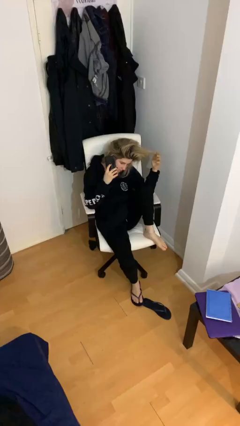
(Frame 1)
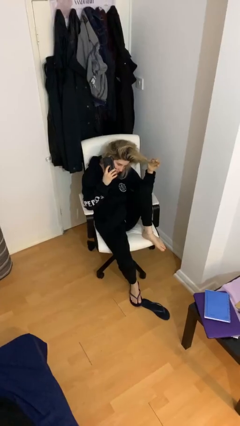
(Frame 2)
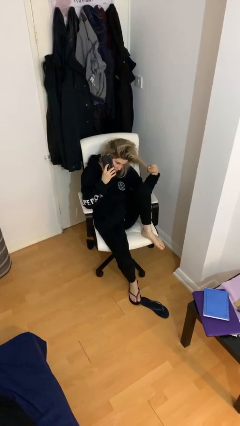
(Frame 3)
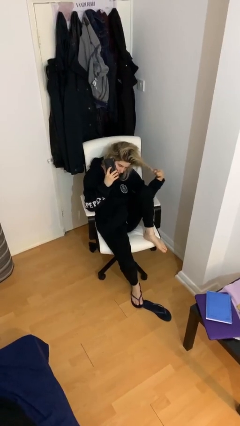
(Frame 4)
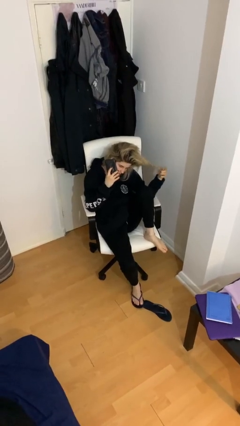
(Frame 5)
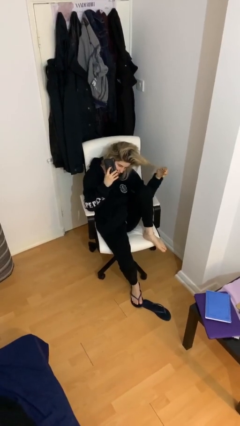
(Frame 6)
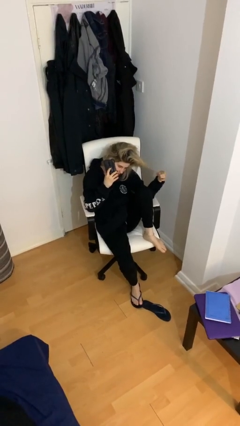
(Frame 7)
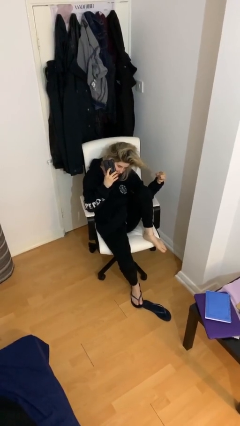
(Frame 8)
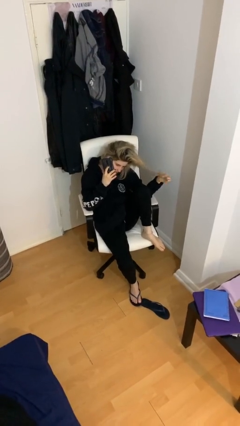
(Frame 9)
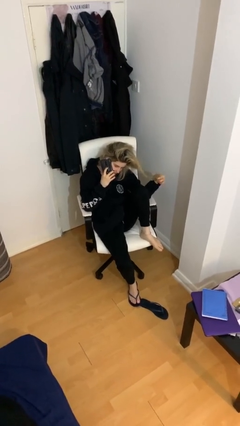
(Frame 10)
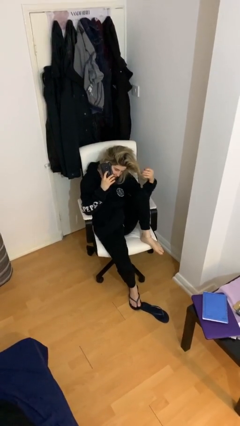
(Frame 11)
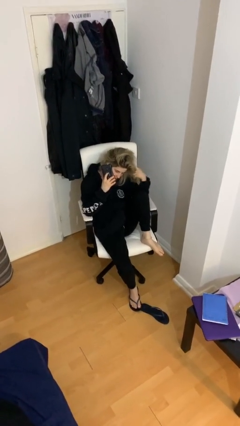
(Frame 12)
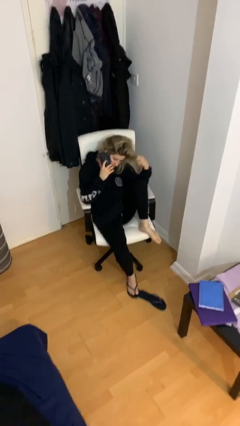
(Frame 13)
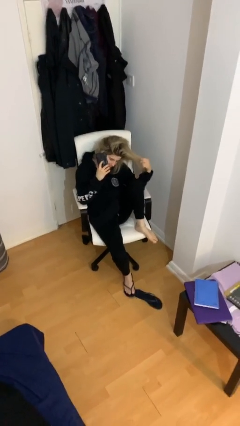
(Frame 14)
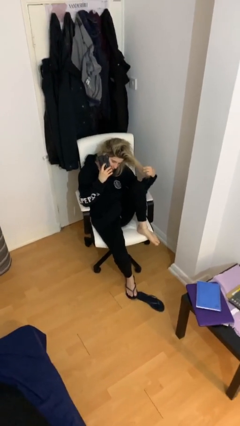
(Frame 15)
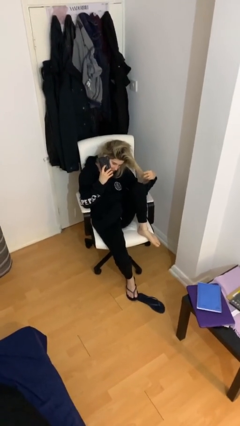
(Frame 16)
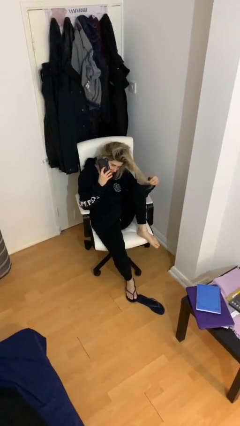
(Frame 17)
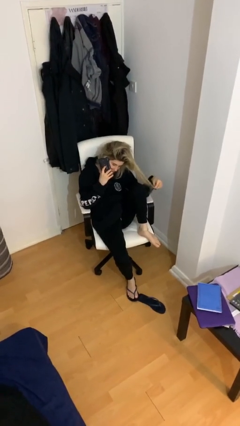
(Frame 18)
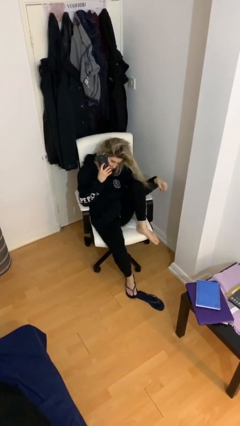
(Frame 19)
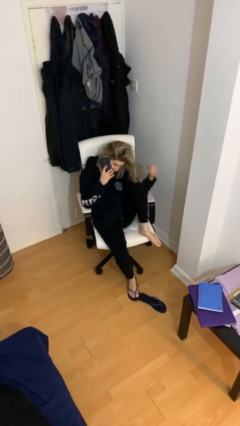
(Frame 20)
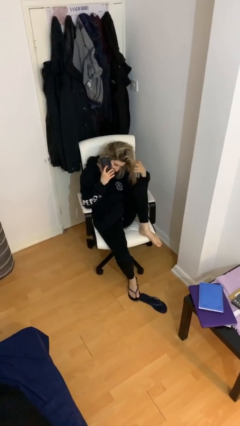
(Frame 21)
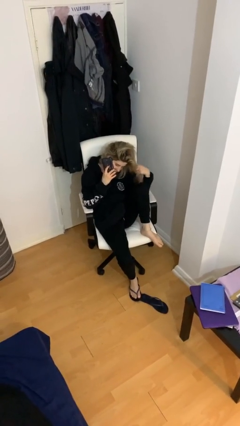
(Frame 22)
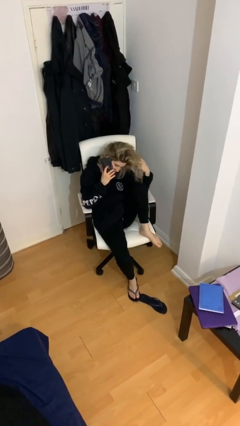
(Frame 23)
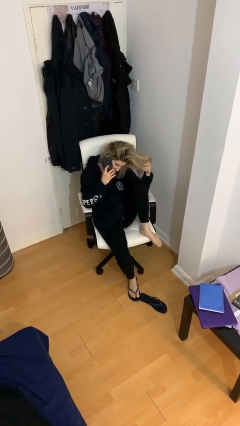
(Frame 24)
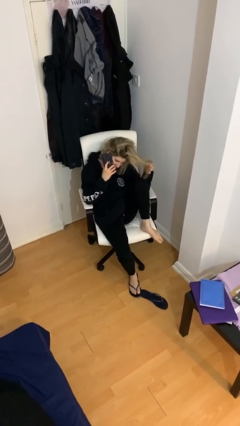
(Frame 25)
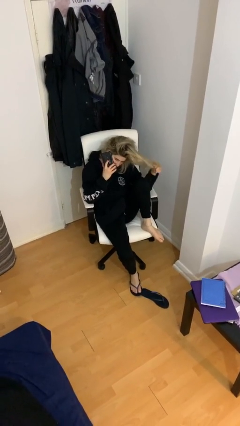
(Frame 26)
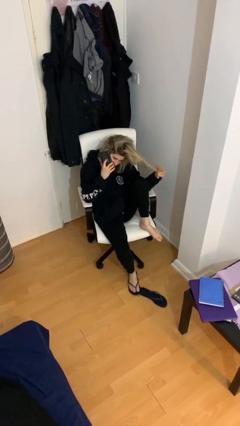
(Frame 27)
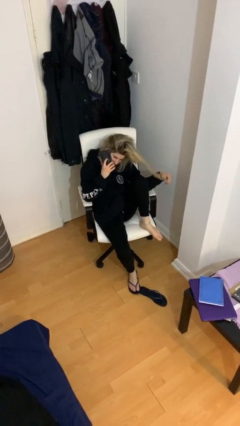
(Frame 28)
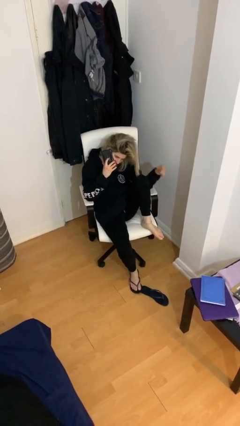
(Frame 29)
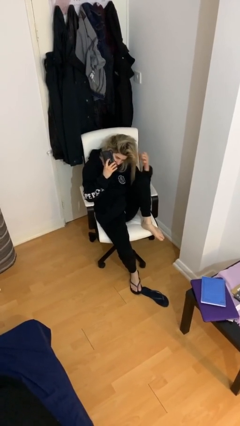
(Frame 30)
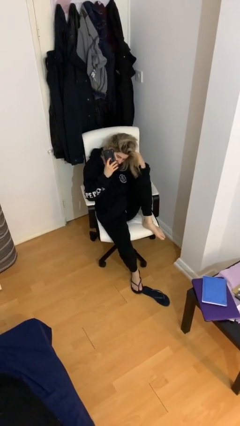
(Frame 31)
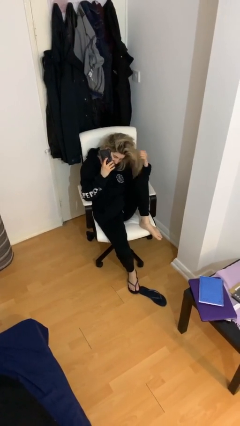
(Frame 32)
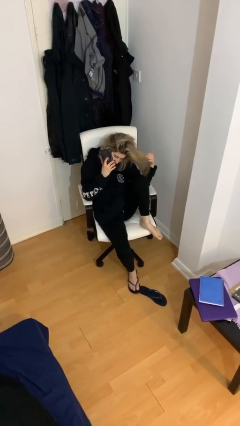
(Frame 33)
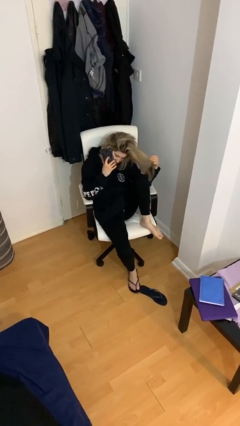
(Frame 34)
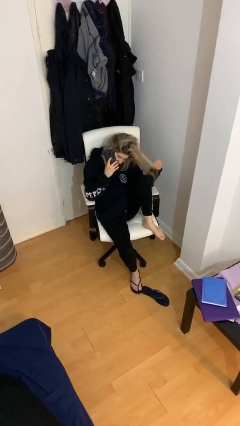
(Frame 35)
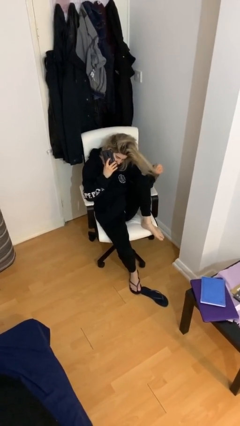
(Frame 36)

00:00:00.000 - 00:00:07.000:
person talks on phone

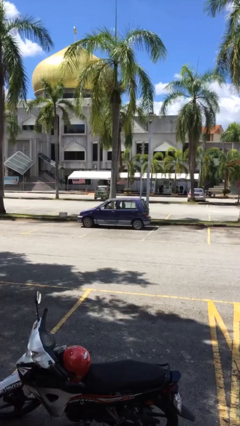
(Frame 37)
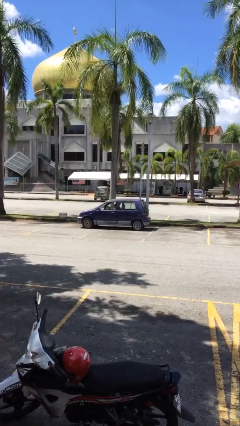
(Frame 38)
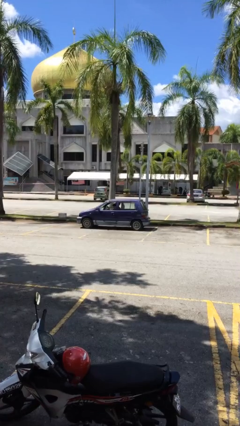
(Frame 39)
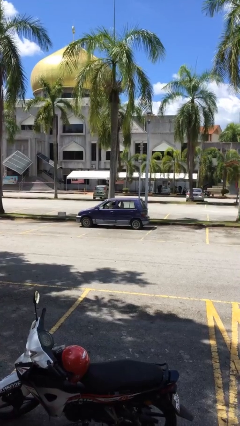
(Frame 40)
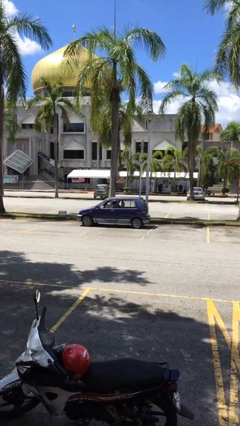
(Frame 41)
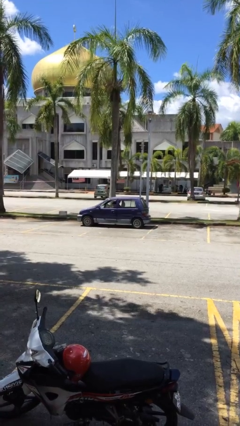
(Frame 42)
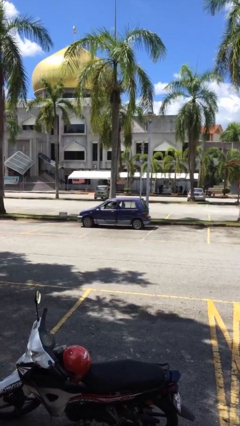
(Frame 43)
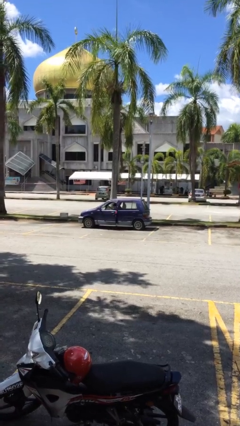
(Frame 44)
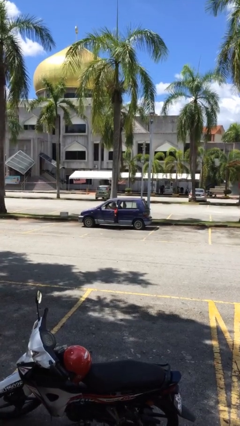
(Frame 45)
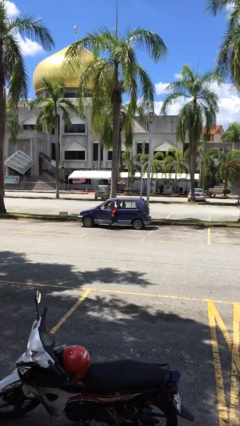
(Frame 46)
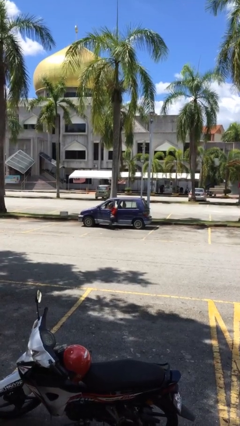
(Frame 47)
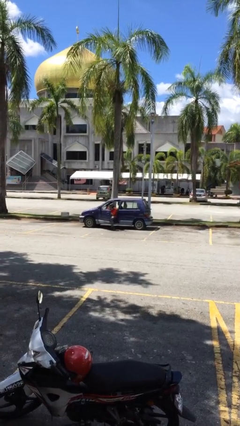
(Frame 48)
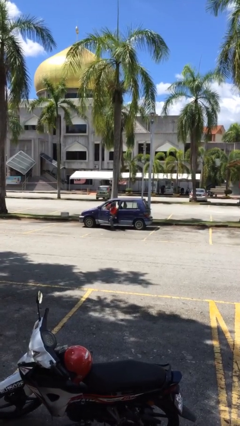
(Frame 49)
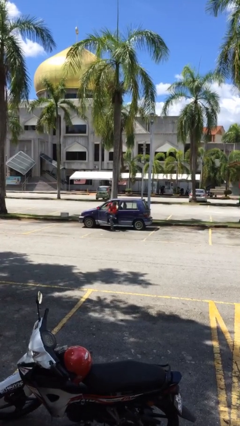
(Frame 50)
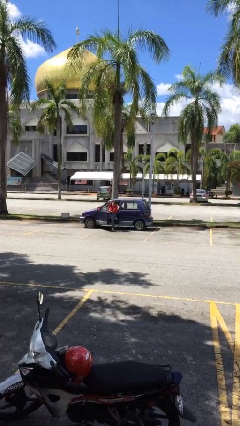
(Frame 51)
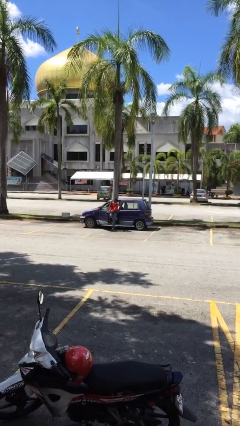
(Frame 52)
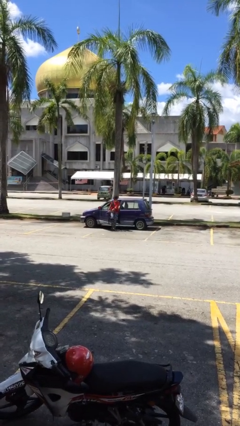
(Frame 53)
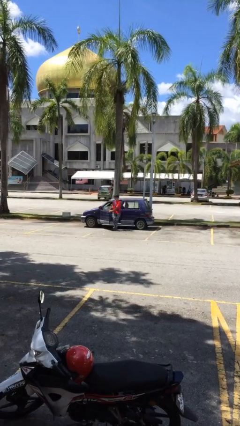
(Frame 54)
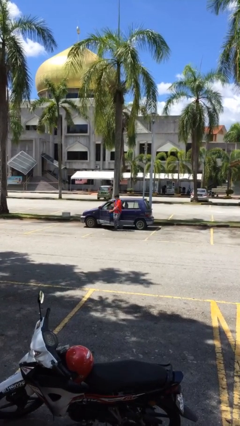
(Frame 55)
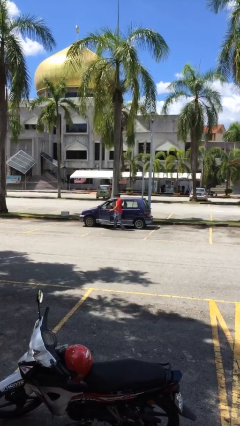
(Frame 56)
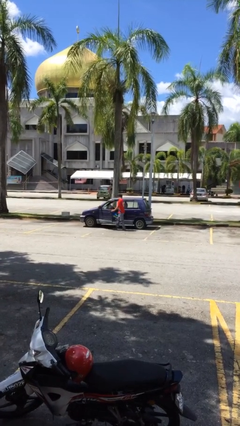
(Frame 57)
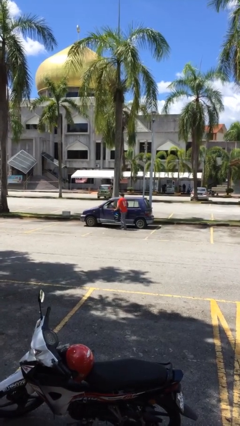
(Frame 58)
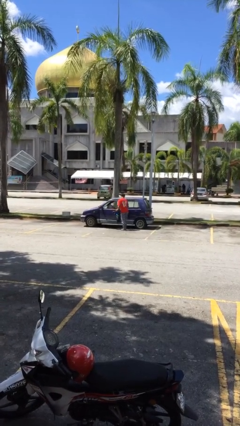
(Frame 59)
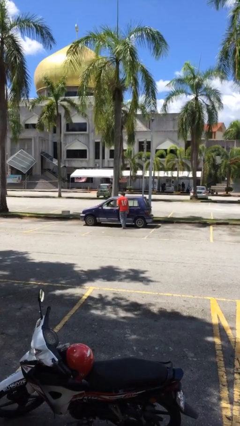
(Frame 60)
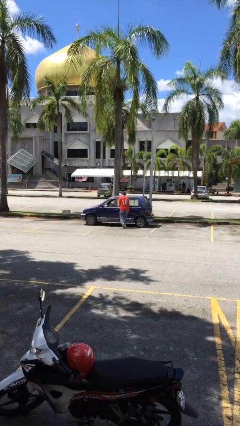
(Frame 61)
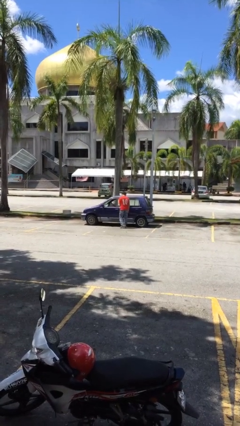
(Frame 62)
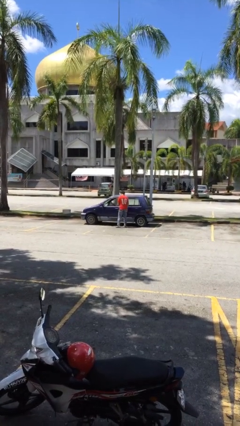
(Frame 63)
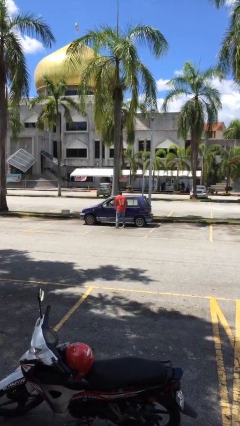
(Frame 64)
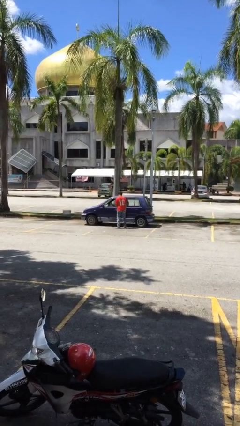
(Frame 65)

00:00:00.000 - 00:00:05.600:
car drops off person

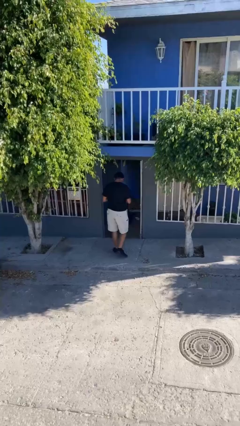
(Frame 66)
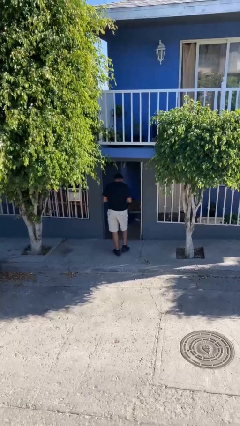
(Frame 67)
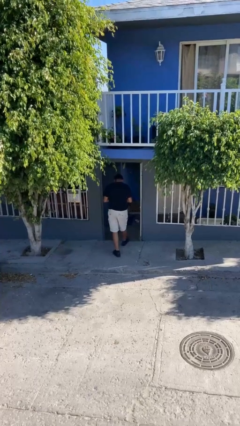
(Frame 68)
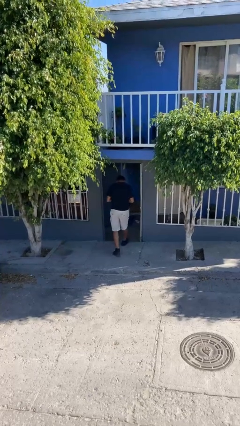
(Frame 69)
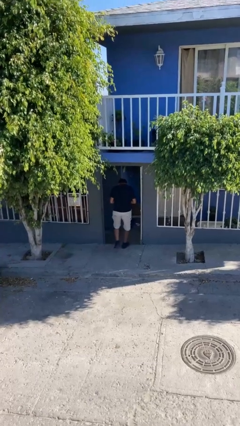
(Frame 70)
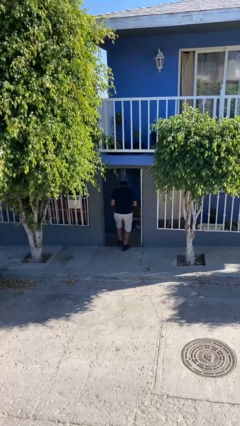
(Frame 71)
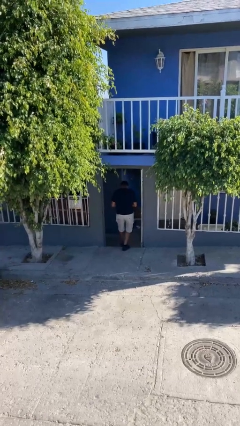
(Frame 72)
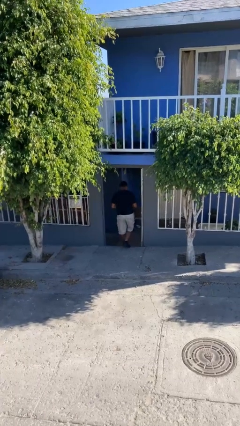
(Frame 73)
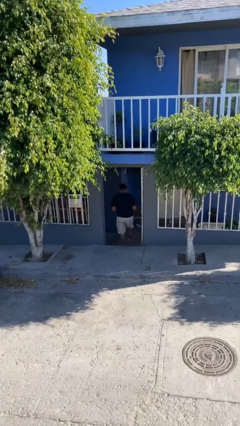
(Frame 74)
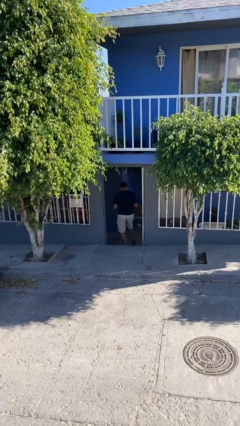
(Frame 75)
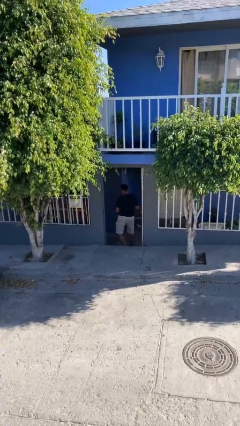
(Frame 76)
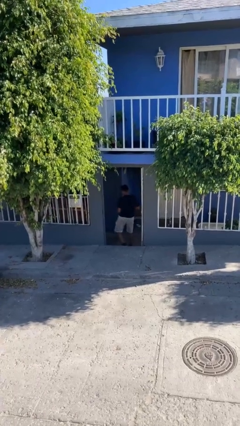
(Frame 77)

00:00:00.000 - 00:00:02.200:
person exits scene through structure

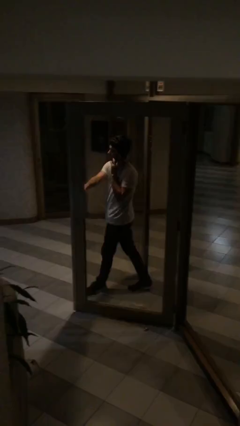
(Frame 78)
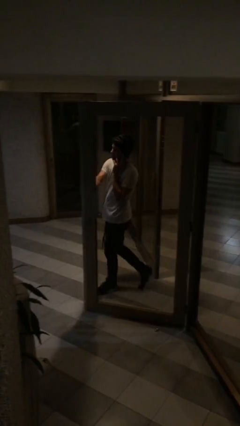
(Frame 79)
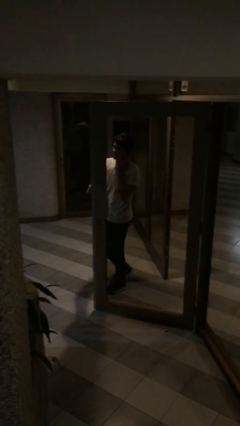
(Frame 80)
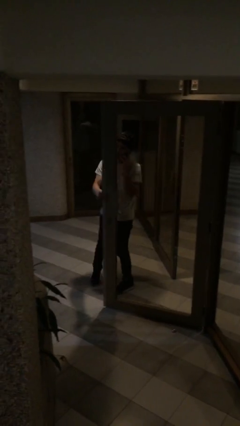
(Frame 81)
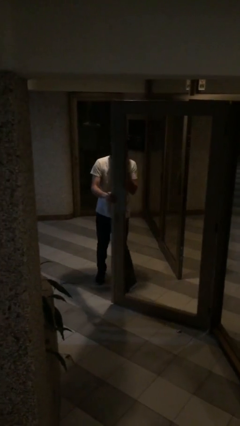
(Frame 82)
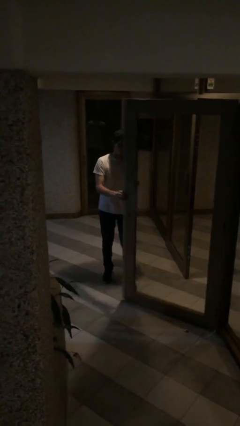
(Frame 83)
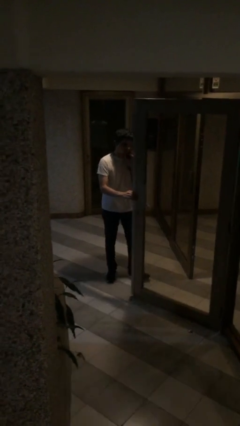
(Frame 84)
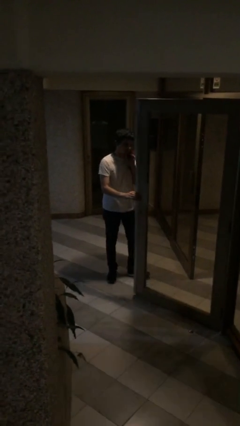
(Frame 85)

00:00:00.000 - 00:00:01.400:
person enters scene through structure

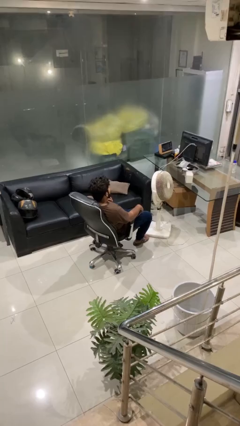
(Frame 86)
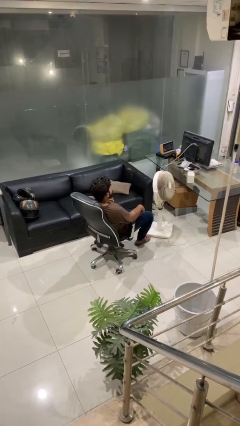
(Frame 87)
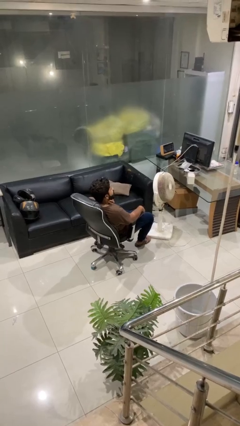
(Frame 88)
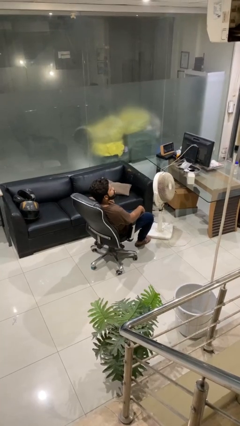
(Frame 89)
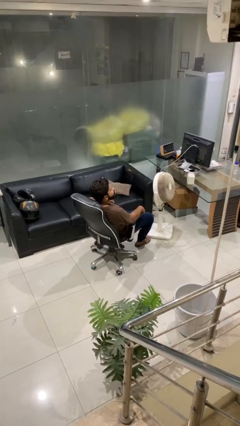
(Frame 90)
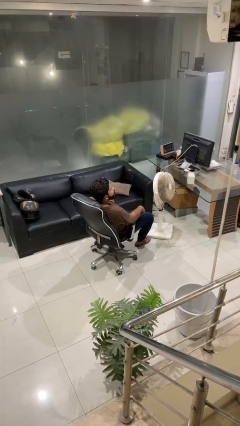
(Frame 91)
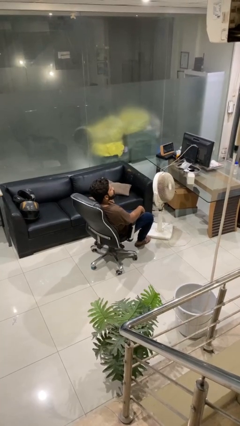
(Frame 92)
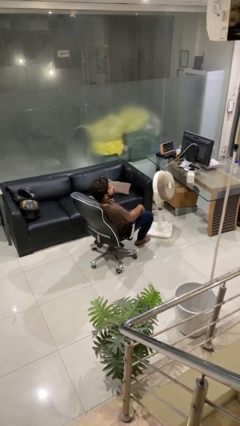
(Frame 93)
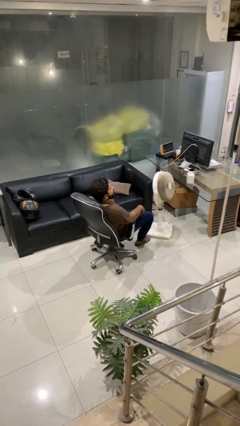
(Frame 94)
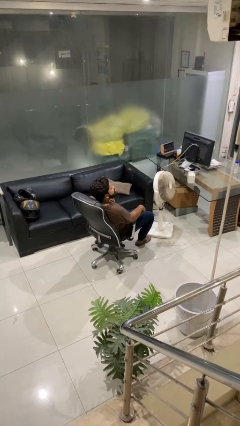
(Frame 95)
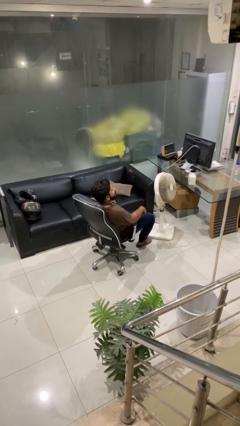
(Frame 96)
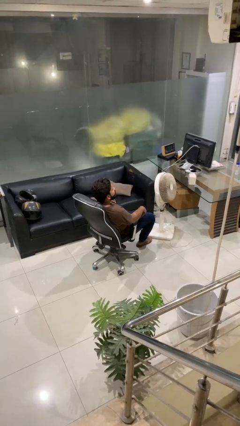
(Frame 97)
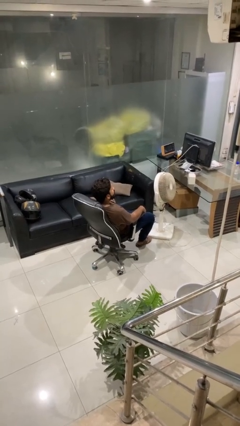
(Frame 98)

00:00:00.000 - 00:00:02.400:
person sticks out tongue
